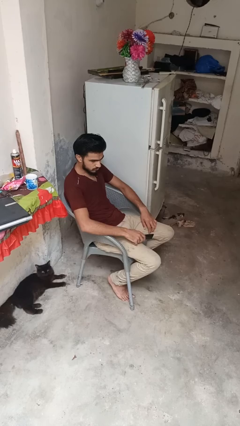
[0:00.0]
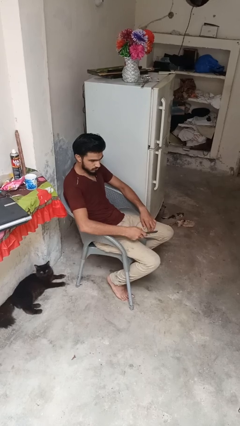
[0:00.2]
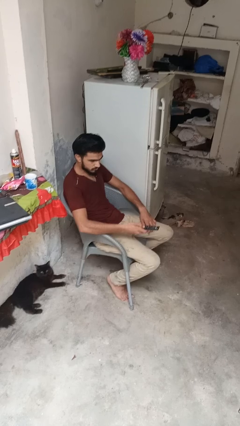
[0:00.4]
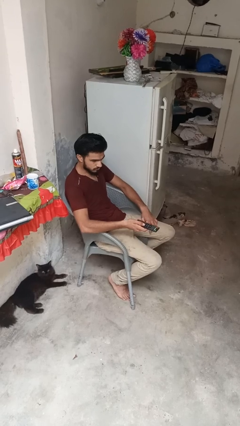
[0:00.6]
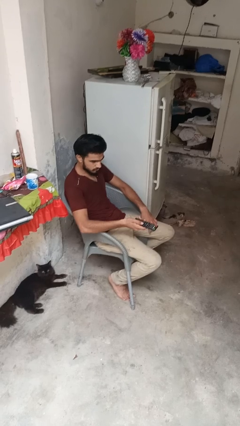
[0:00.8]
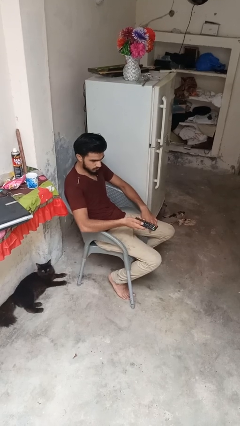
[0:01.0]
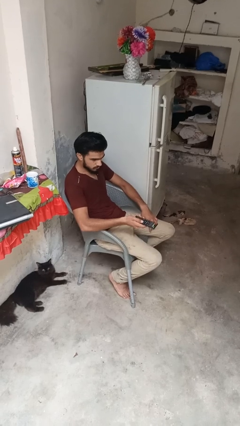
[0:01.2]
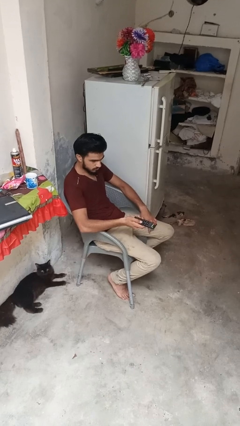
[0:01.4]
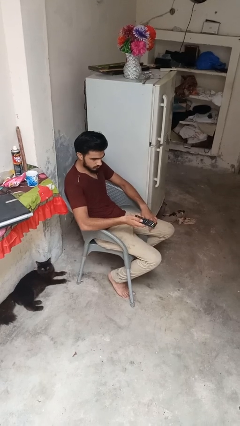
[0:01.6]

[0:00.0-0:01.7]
person uses television remote

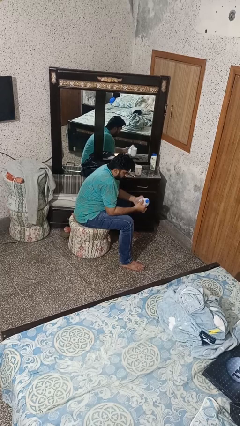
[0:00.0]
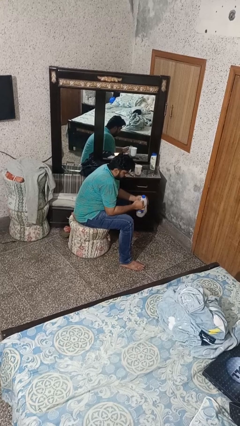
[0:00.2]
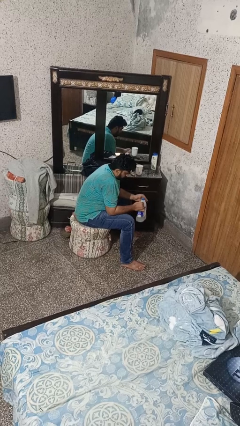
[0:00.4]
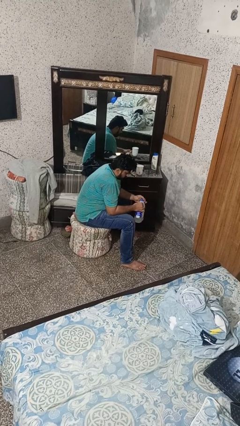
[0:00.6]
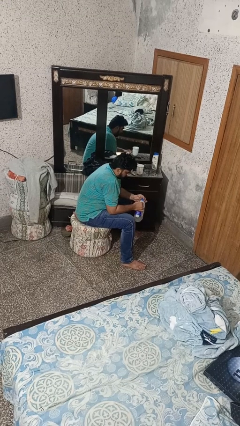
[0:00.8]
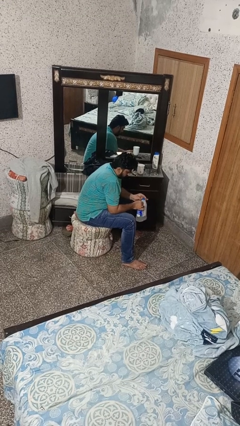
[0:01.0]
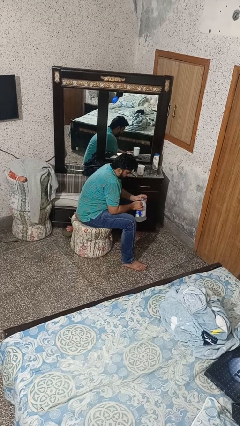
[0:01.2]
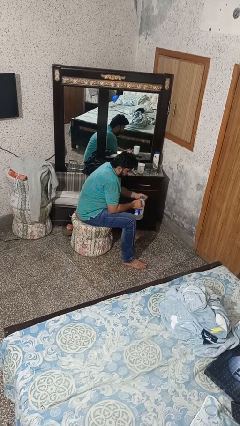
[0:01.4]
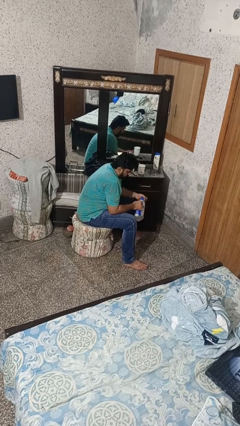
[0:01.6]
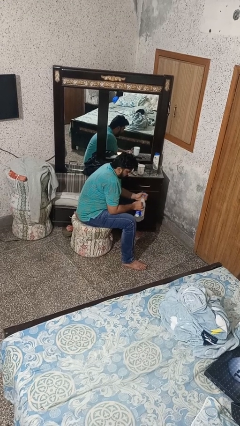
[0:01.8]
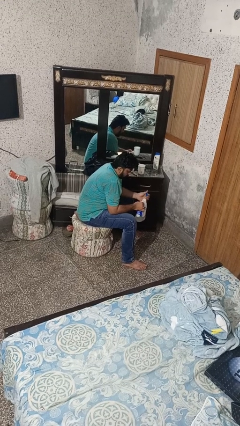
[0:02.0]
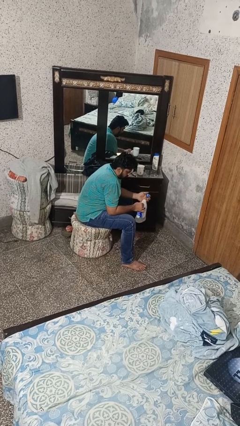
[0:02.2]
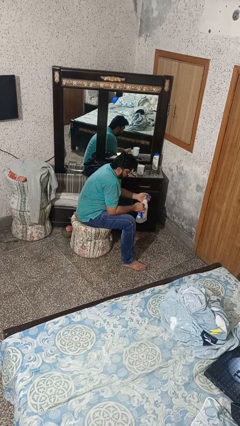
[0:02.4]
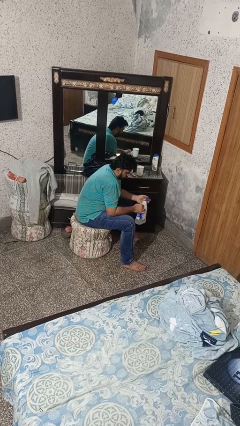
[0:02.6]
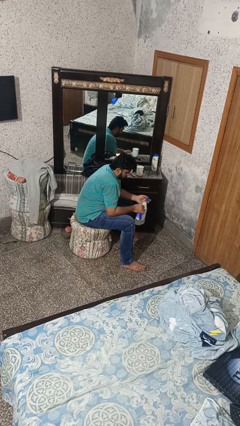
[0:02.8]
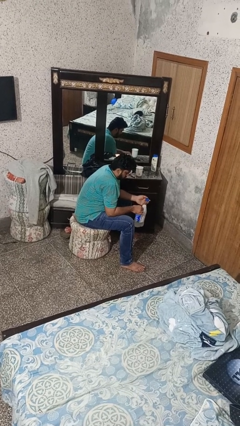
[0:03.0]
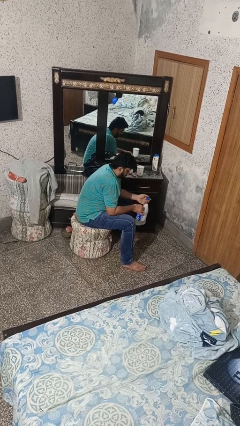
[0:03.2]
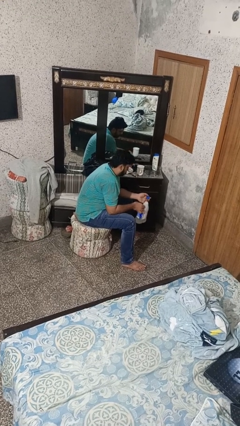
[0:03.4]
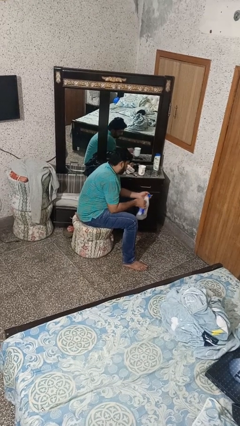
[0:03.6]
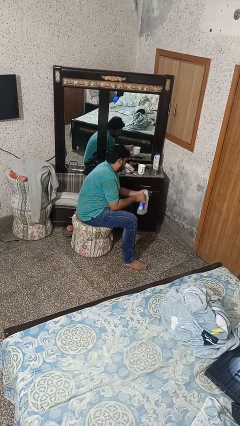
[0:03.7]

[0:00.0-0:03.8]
person unscrews lid from bottle

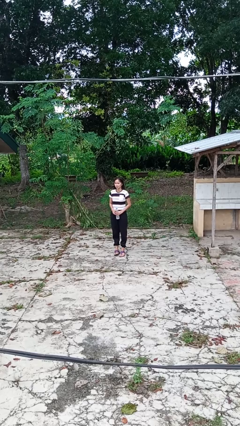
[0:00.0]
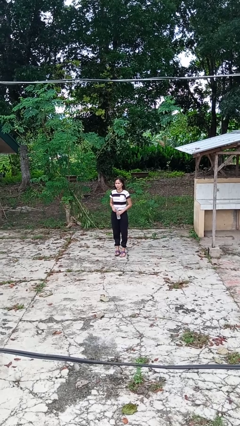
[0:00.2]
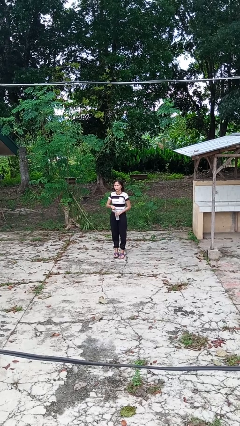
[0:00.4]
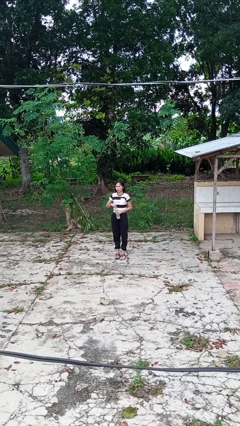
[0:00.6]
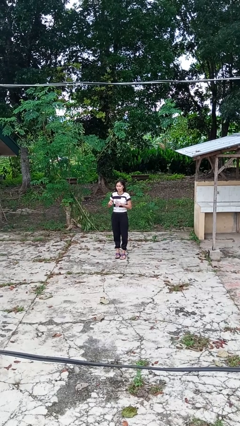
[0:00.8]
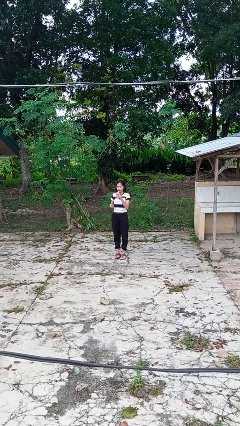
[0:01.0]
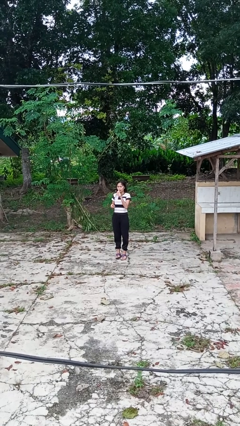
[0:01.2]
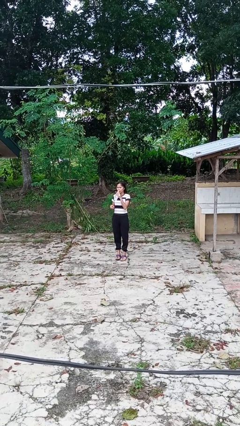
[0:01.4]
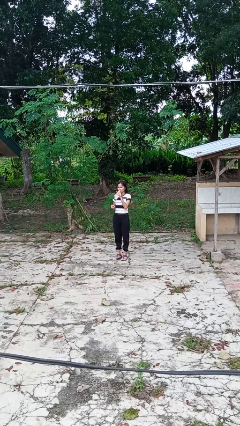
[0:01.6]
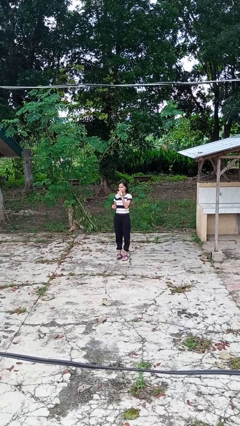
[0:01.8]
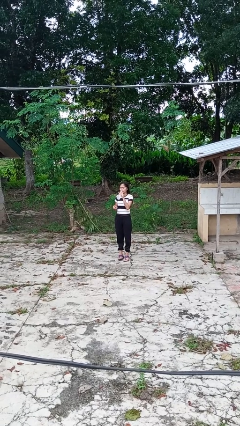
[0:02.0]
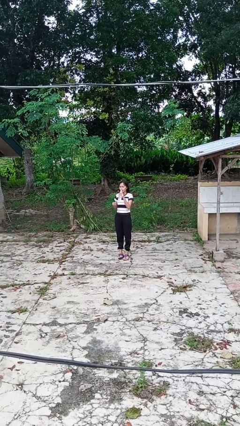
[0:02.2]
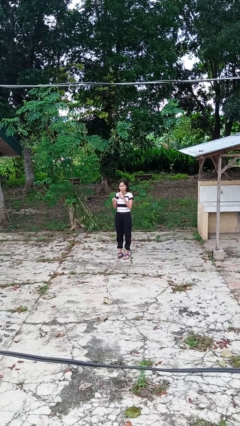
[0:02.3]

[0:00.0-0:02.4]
person drinks from bottle

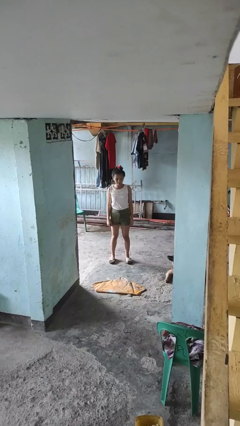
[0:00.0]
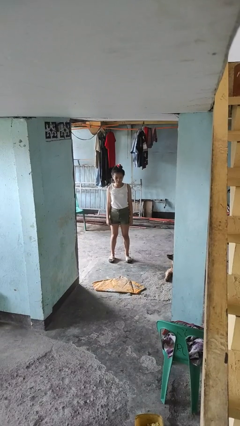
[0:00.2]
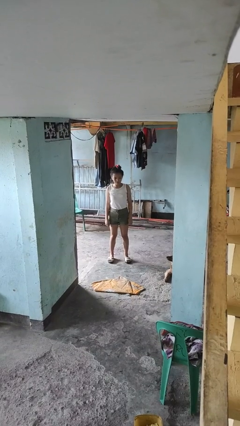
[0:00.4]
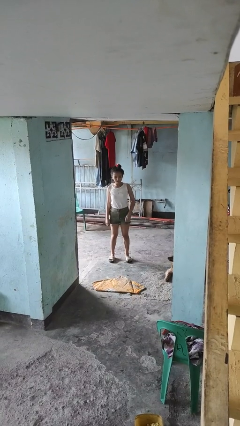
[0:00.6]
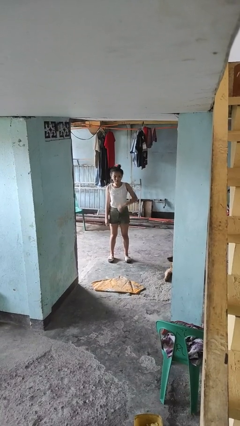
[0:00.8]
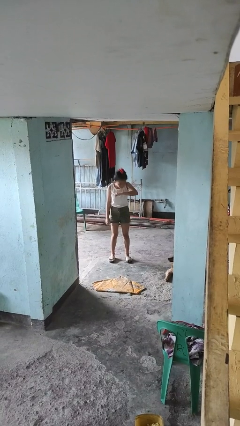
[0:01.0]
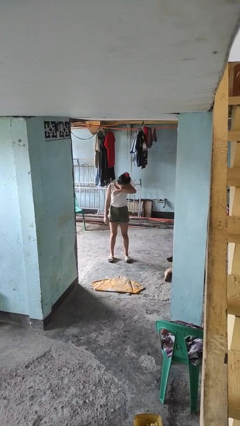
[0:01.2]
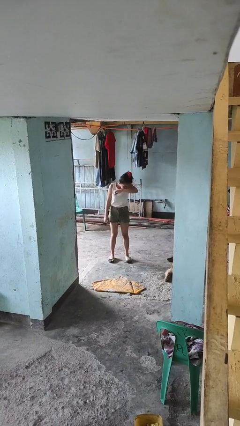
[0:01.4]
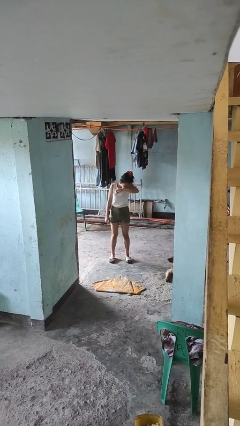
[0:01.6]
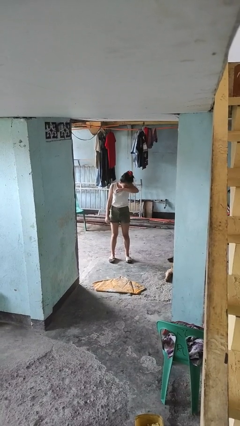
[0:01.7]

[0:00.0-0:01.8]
person sneezes into arm

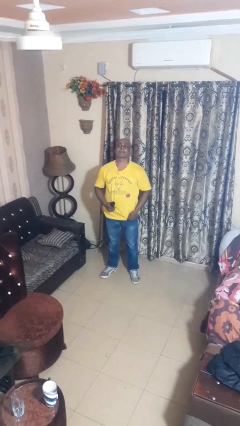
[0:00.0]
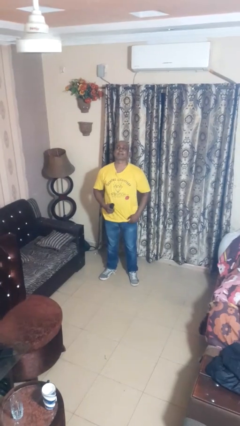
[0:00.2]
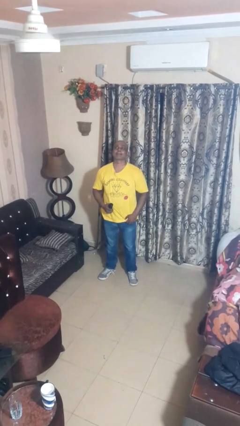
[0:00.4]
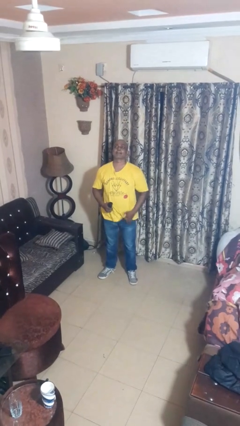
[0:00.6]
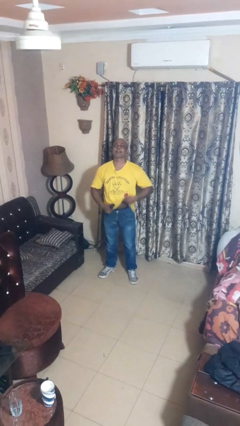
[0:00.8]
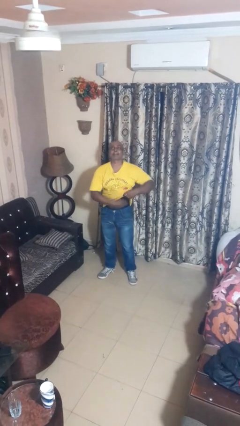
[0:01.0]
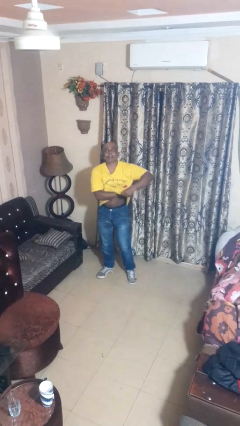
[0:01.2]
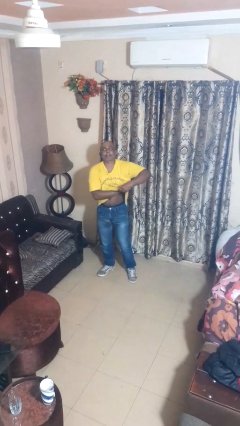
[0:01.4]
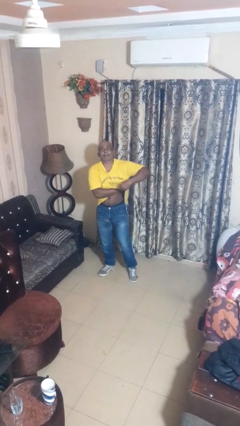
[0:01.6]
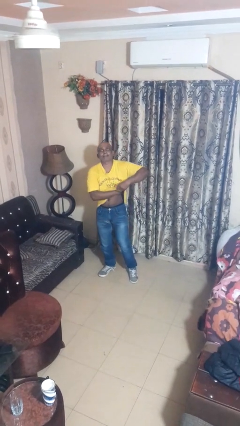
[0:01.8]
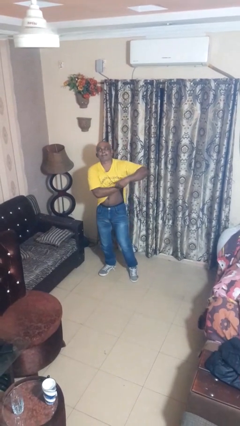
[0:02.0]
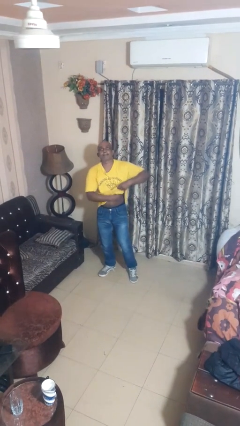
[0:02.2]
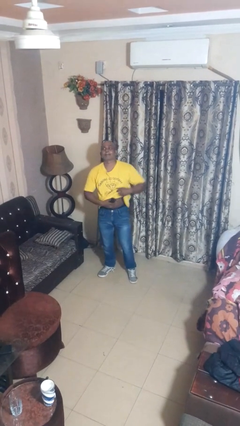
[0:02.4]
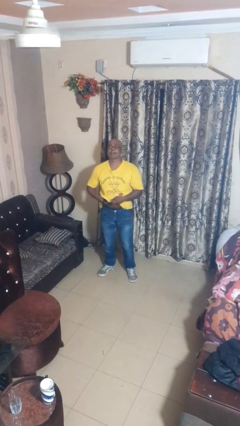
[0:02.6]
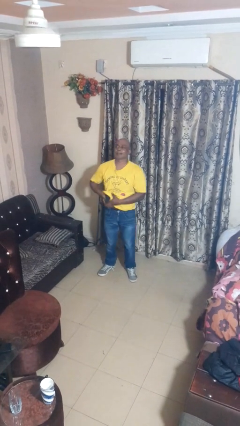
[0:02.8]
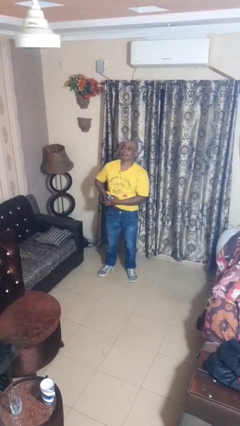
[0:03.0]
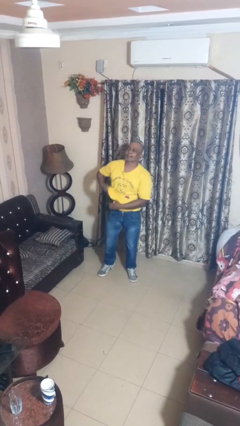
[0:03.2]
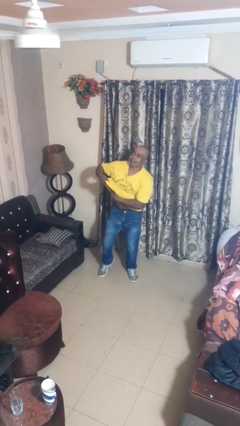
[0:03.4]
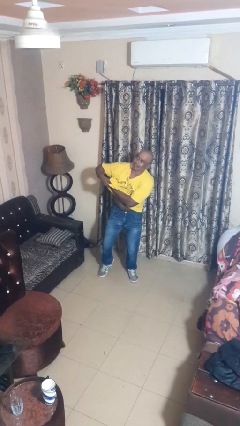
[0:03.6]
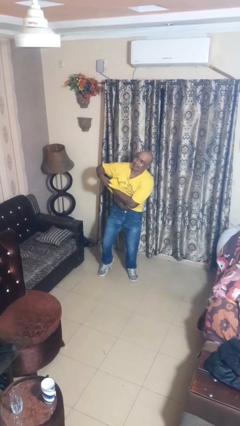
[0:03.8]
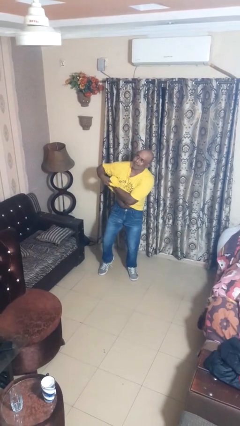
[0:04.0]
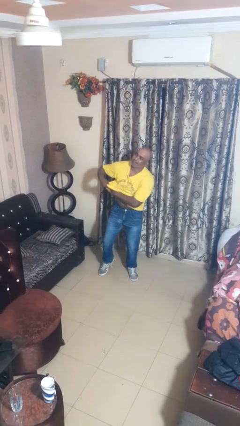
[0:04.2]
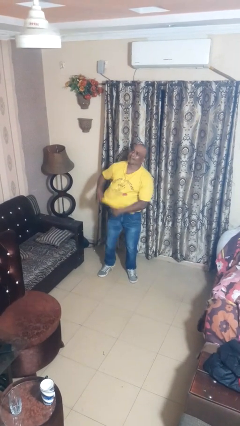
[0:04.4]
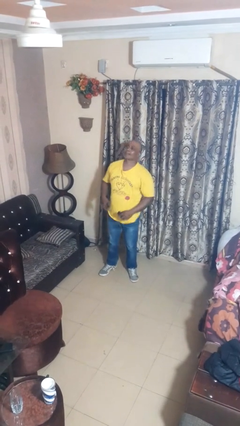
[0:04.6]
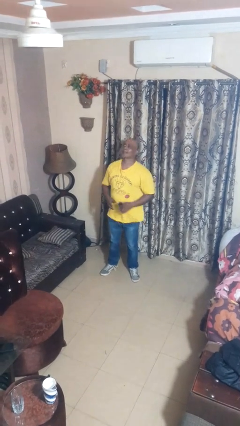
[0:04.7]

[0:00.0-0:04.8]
person applies deodorant

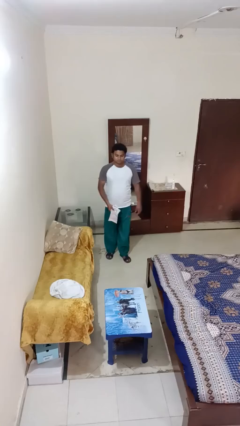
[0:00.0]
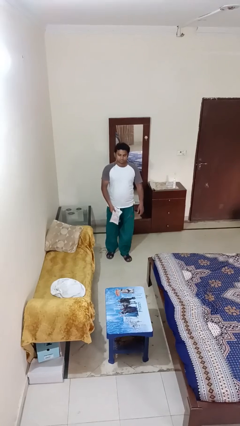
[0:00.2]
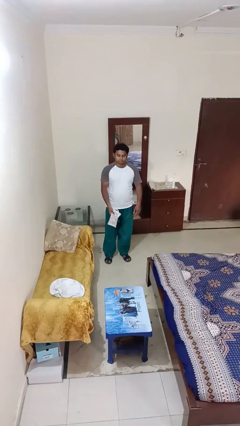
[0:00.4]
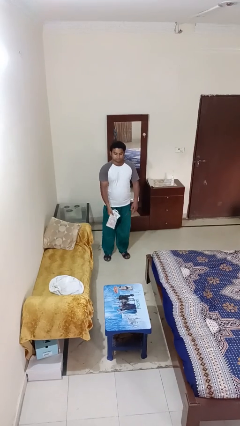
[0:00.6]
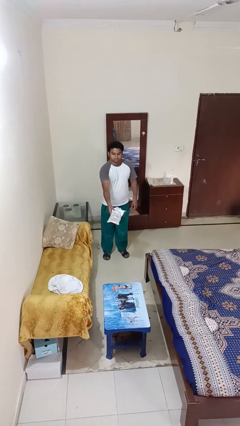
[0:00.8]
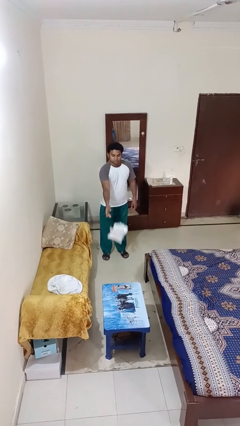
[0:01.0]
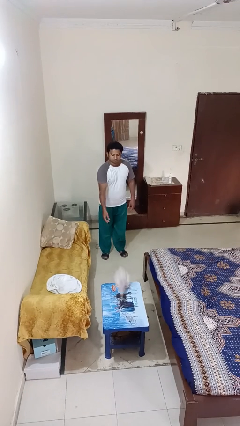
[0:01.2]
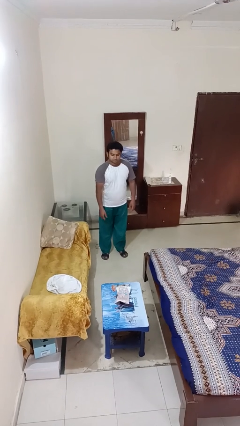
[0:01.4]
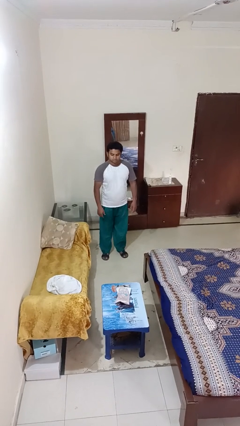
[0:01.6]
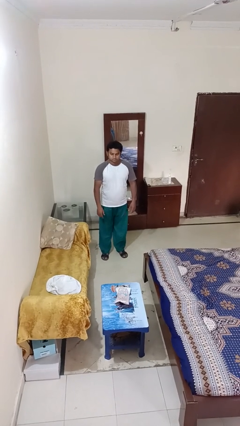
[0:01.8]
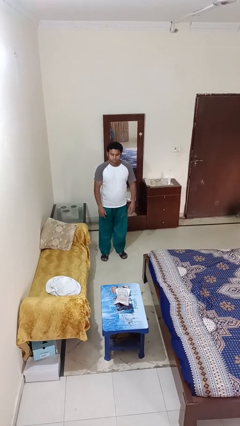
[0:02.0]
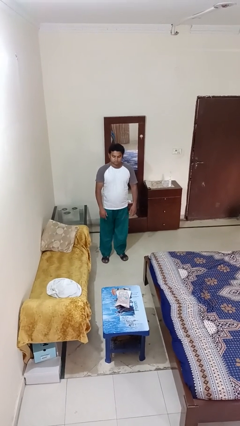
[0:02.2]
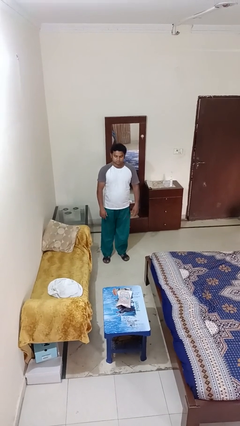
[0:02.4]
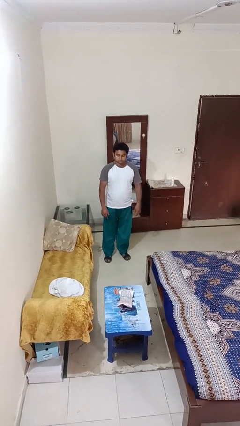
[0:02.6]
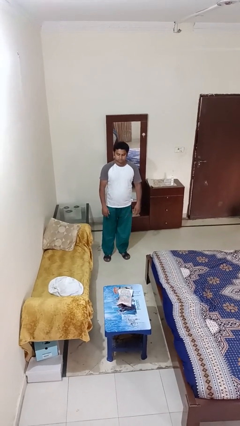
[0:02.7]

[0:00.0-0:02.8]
person throws object on table
